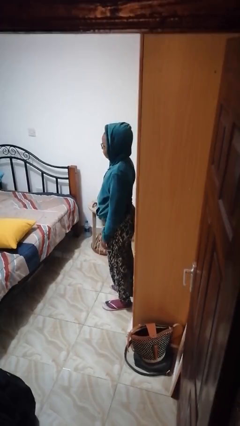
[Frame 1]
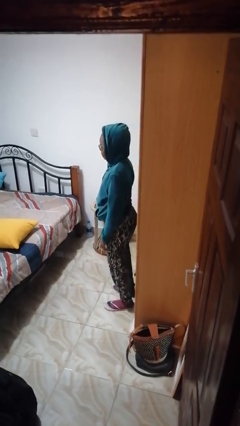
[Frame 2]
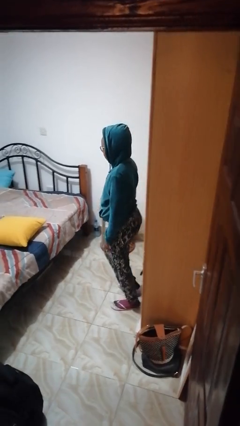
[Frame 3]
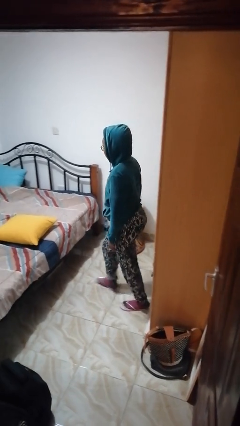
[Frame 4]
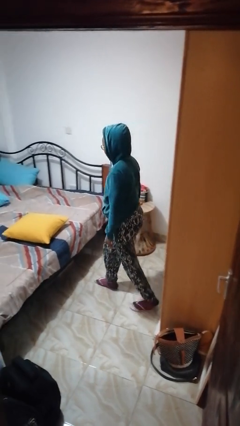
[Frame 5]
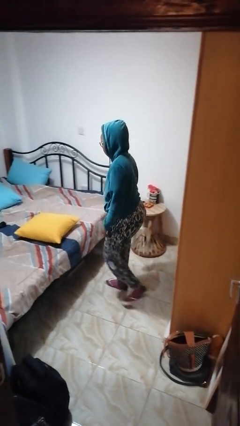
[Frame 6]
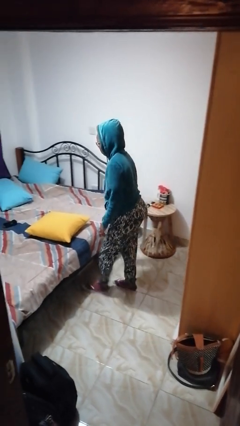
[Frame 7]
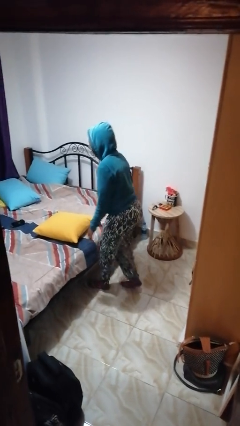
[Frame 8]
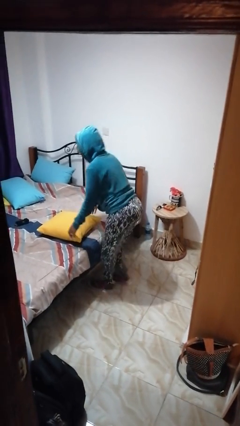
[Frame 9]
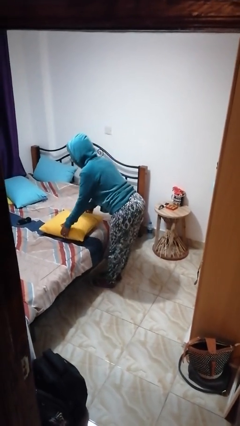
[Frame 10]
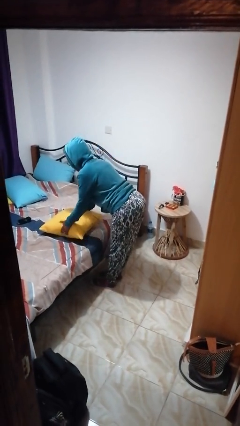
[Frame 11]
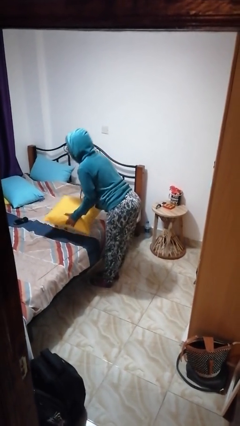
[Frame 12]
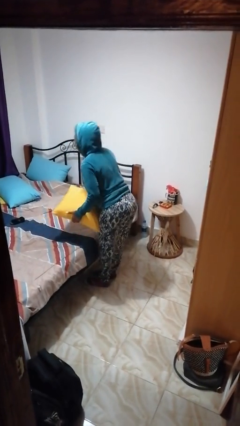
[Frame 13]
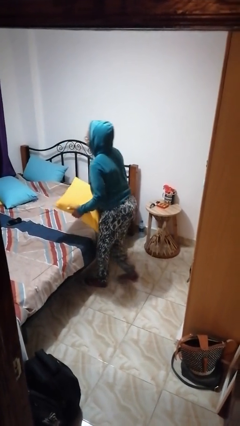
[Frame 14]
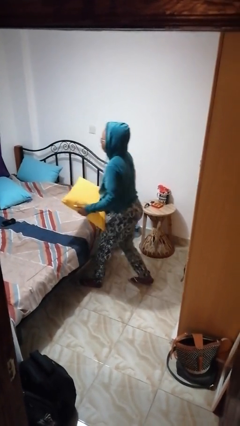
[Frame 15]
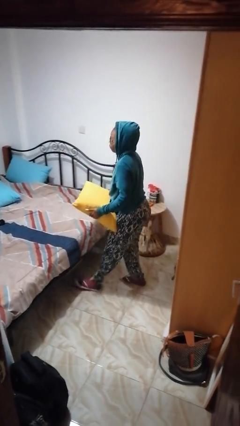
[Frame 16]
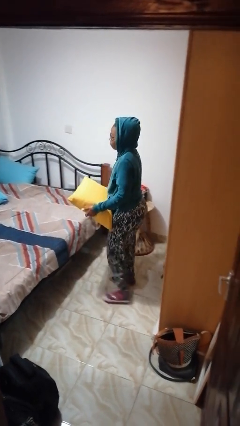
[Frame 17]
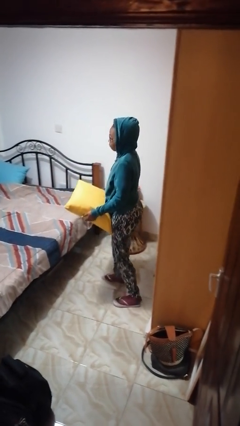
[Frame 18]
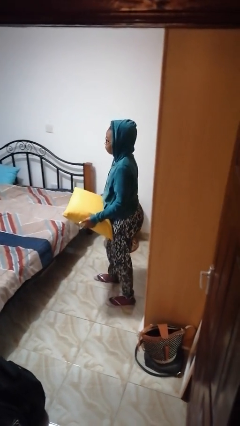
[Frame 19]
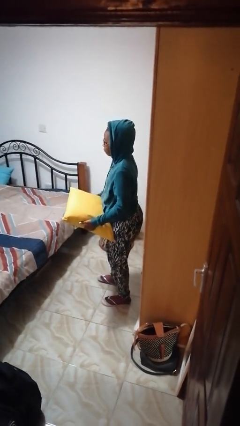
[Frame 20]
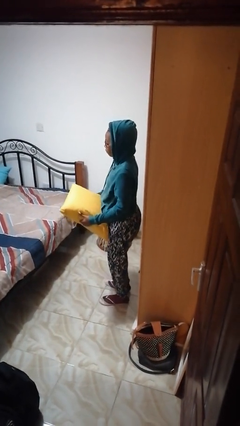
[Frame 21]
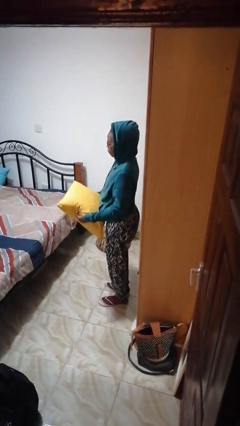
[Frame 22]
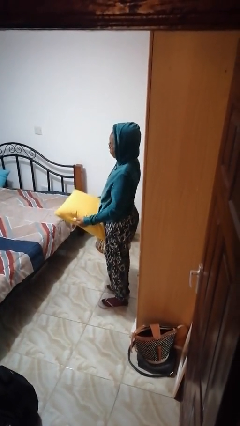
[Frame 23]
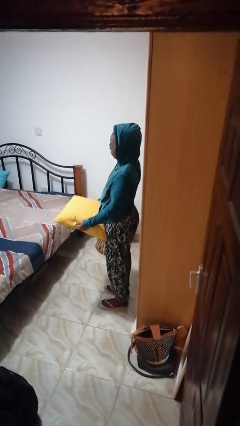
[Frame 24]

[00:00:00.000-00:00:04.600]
person picks up object from bed

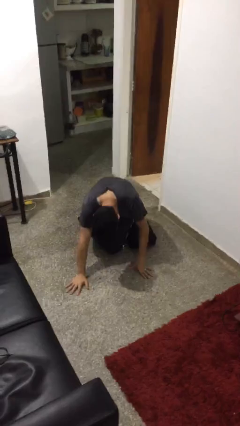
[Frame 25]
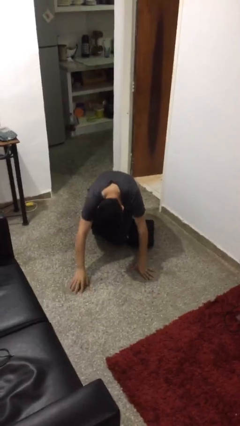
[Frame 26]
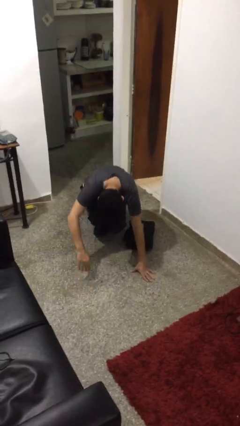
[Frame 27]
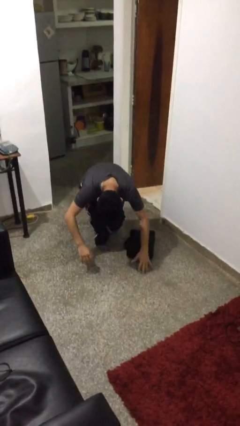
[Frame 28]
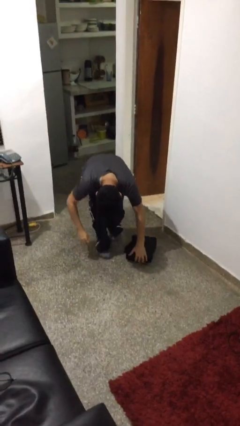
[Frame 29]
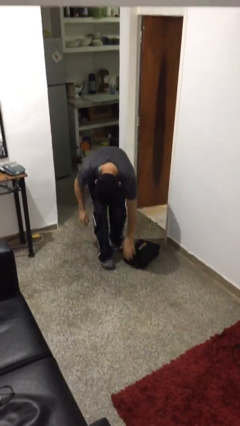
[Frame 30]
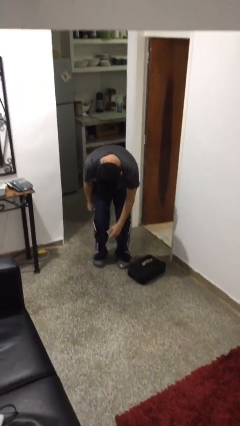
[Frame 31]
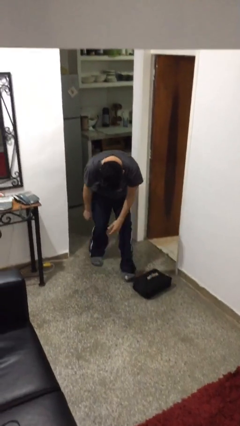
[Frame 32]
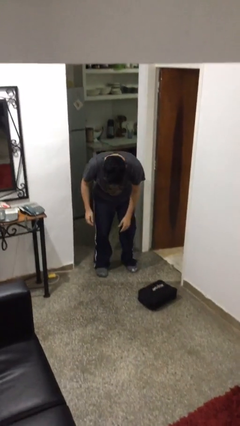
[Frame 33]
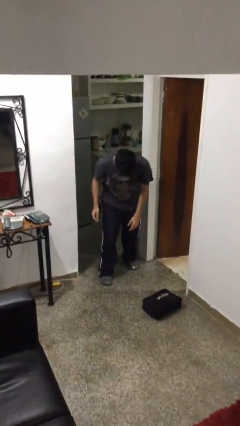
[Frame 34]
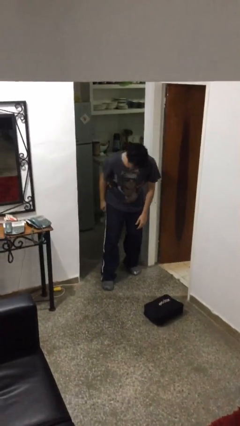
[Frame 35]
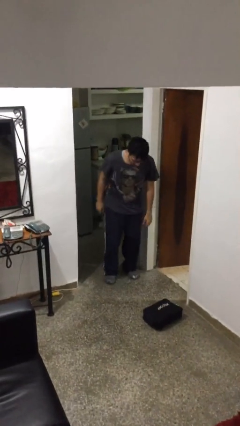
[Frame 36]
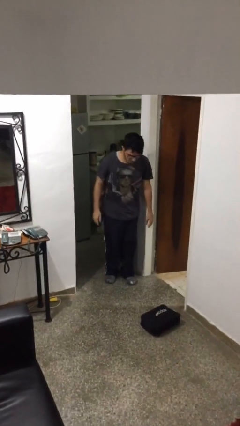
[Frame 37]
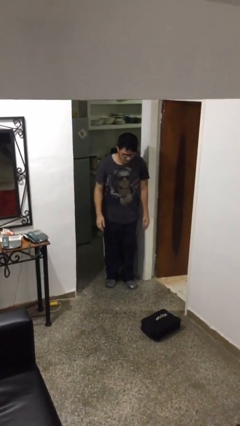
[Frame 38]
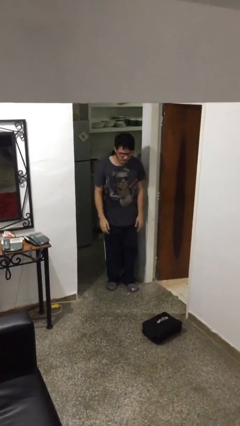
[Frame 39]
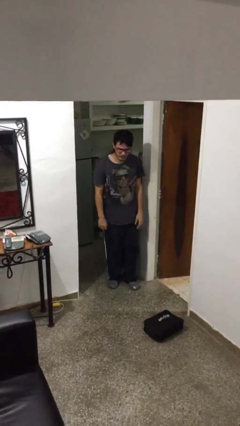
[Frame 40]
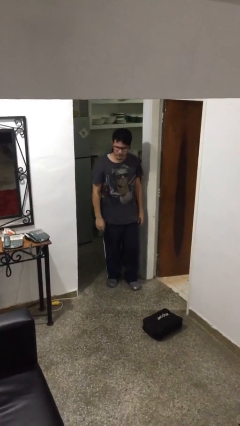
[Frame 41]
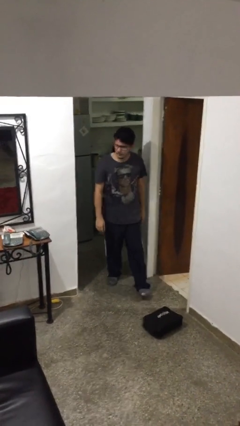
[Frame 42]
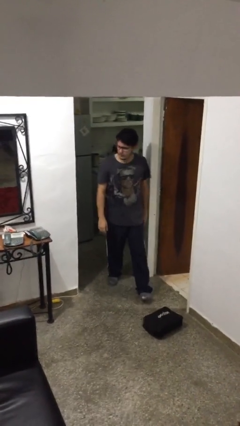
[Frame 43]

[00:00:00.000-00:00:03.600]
person stands up from floor

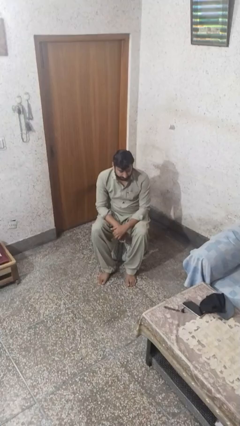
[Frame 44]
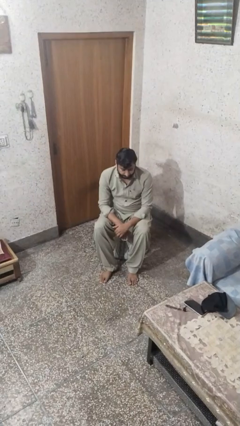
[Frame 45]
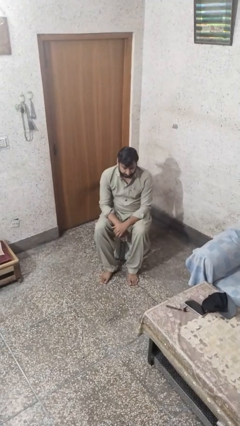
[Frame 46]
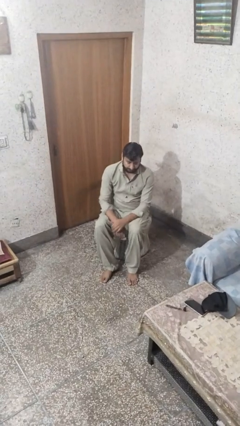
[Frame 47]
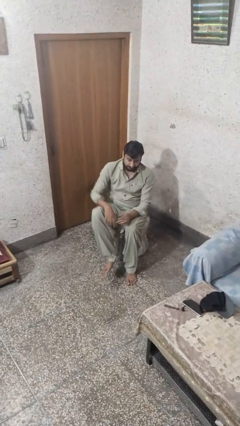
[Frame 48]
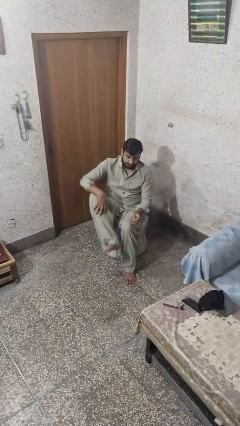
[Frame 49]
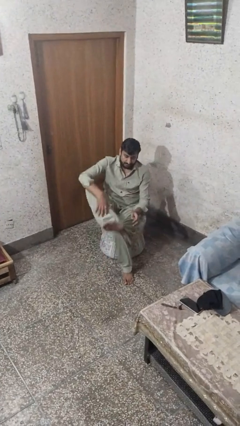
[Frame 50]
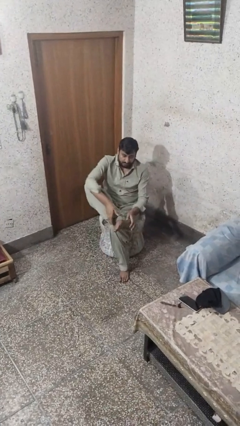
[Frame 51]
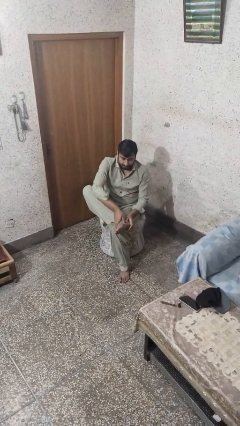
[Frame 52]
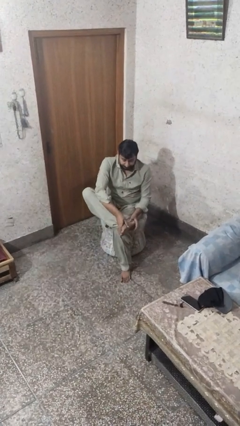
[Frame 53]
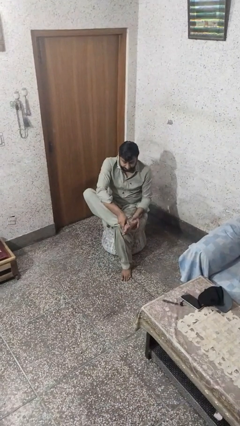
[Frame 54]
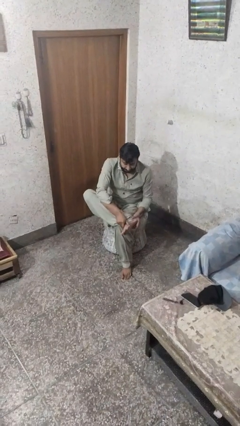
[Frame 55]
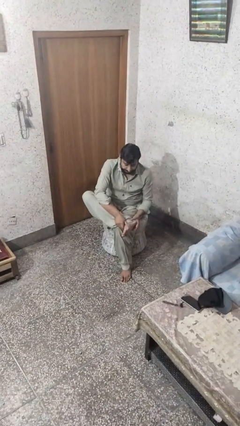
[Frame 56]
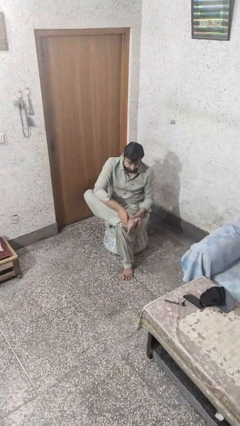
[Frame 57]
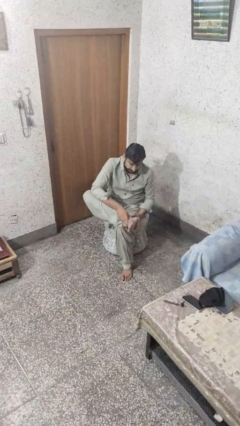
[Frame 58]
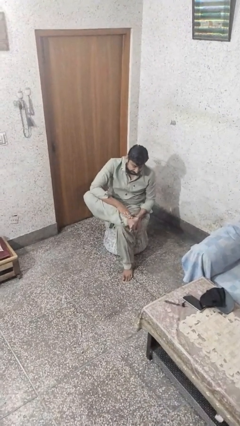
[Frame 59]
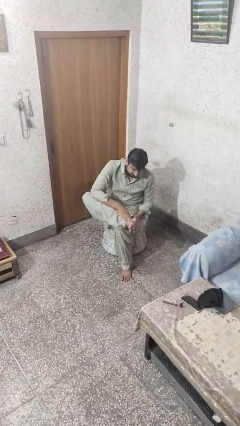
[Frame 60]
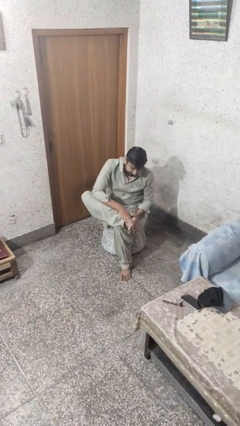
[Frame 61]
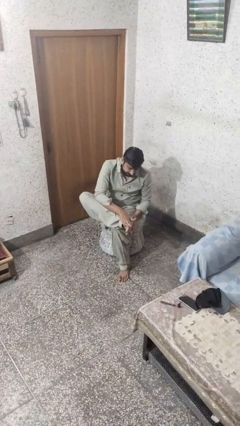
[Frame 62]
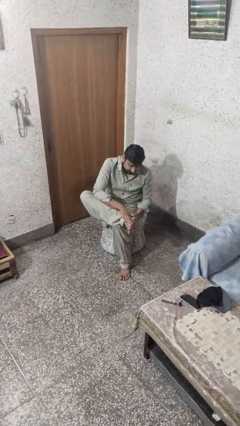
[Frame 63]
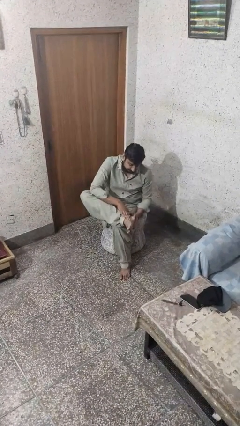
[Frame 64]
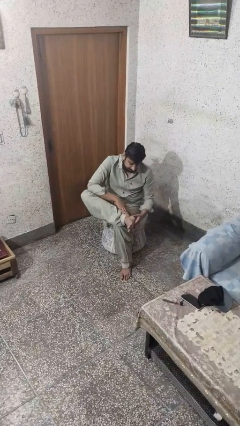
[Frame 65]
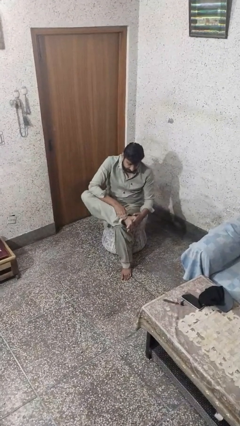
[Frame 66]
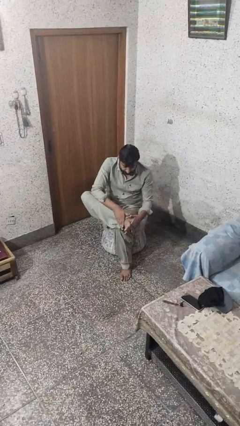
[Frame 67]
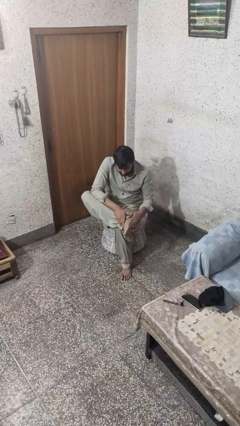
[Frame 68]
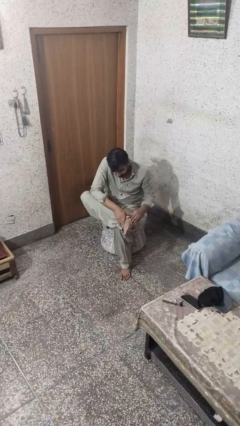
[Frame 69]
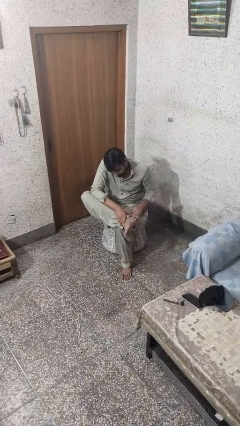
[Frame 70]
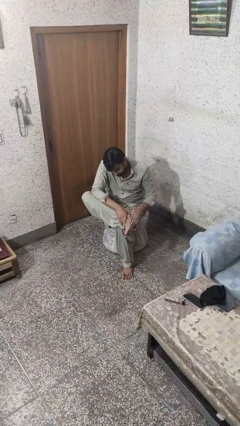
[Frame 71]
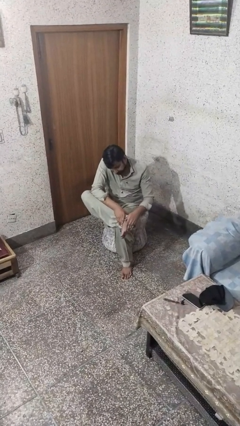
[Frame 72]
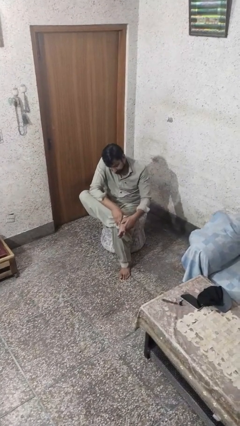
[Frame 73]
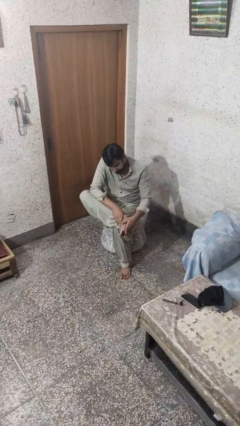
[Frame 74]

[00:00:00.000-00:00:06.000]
person rubs foot

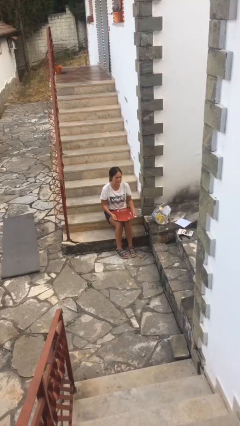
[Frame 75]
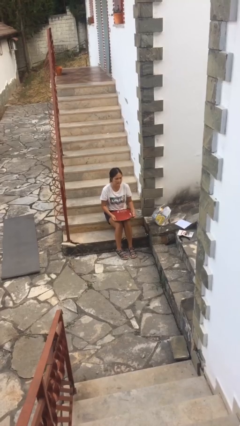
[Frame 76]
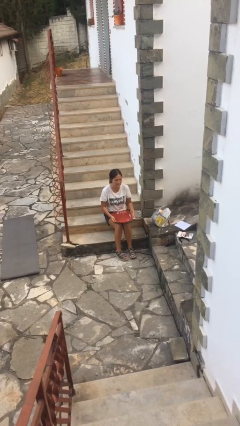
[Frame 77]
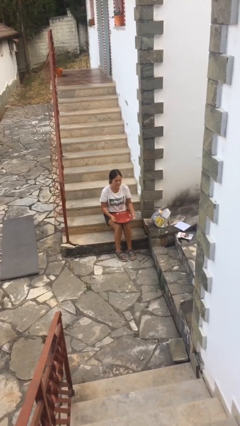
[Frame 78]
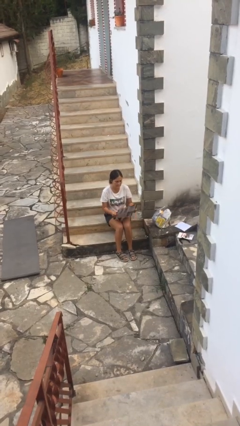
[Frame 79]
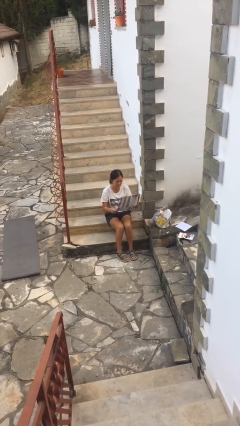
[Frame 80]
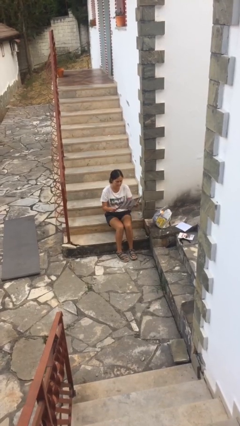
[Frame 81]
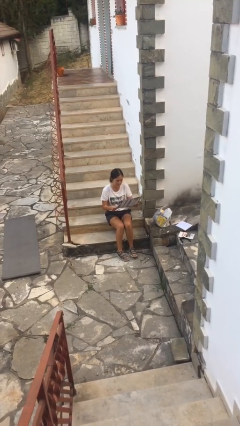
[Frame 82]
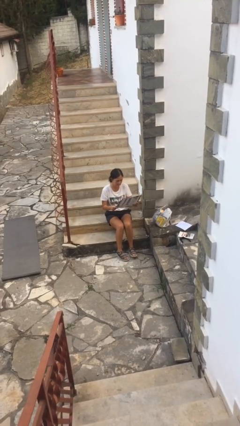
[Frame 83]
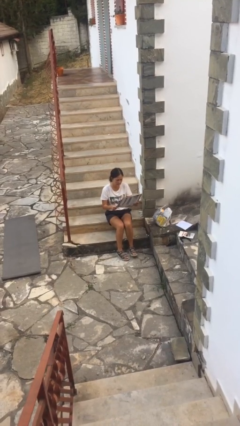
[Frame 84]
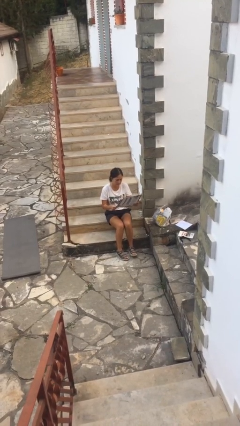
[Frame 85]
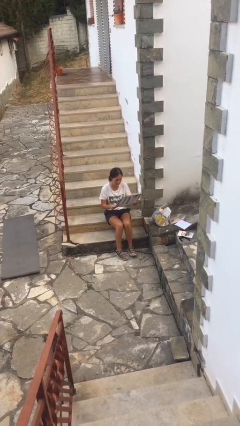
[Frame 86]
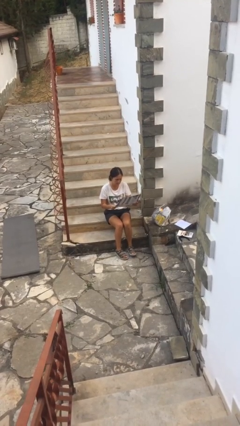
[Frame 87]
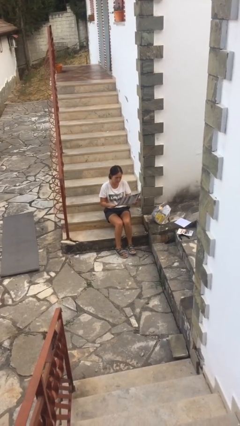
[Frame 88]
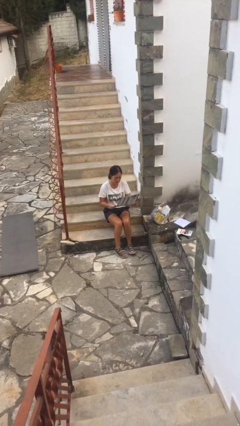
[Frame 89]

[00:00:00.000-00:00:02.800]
person reads newspaper

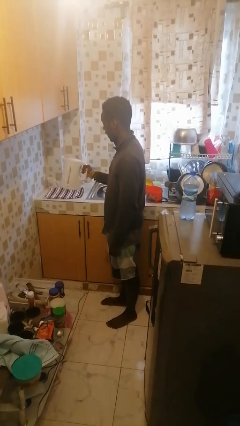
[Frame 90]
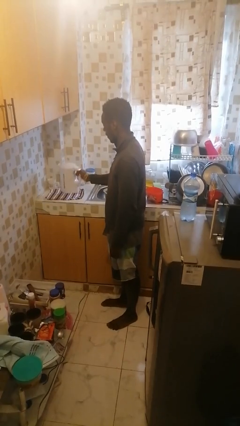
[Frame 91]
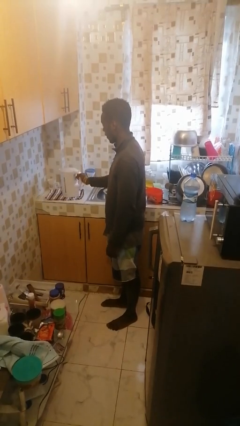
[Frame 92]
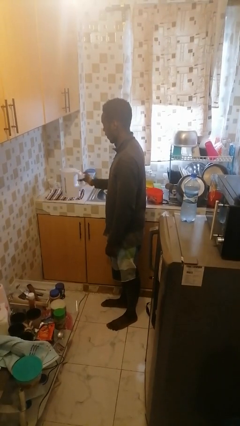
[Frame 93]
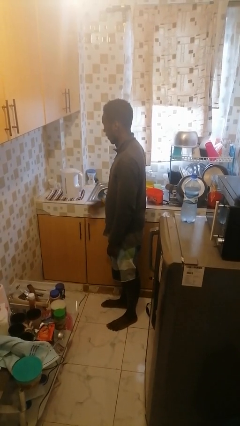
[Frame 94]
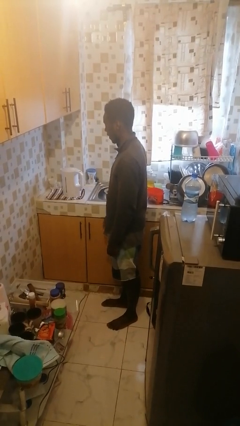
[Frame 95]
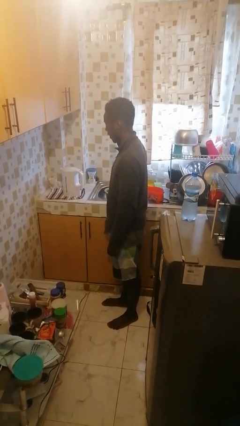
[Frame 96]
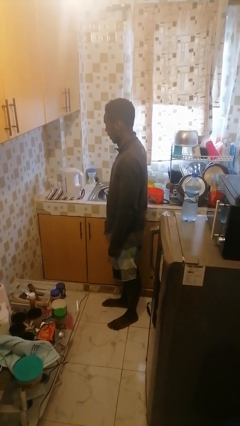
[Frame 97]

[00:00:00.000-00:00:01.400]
person puts down object on countertop
